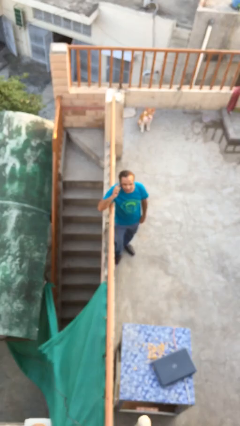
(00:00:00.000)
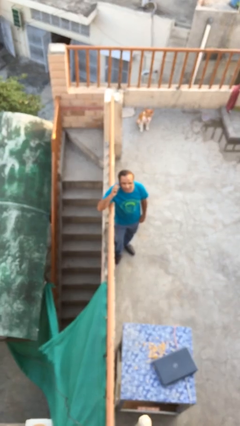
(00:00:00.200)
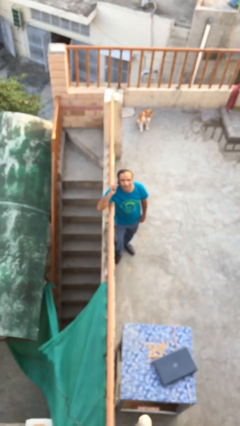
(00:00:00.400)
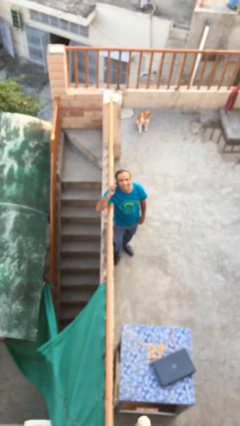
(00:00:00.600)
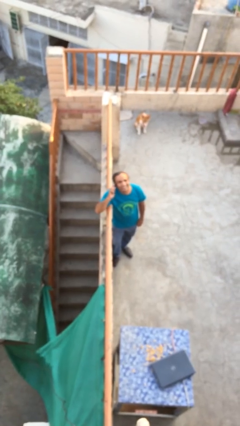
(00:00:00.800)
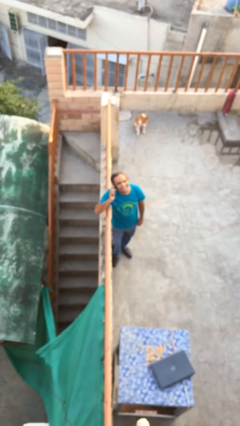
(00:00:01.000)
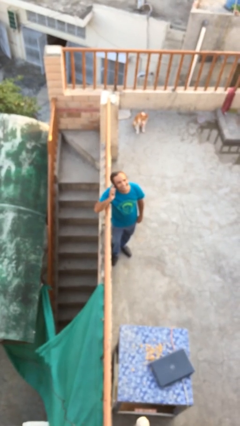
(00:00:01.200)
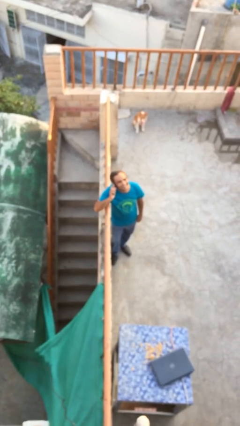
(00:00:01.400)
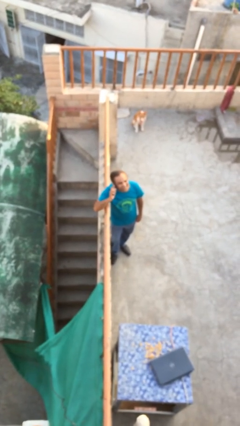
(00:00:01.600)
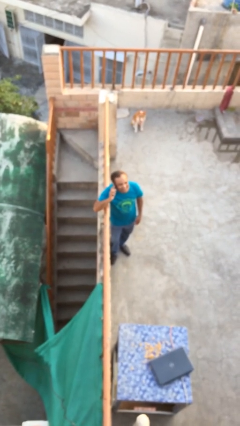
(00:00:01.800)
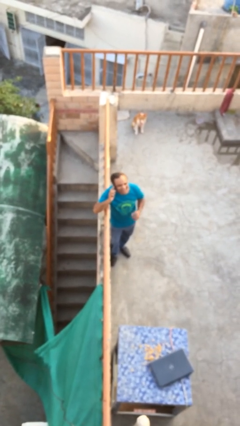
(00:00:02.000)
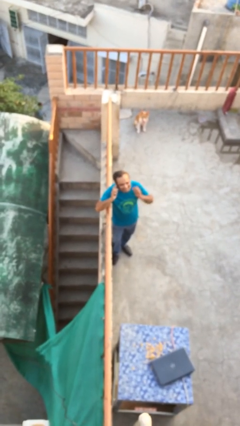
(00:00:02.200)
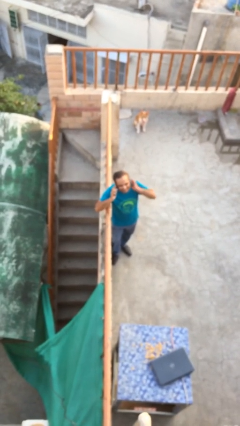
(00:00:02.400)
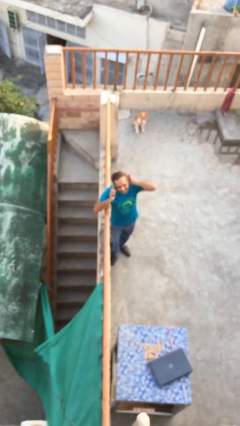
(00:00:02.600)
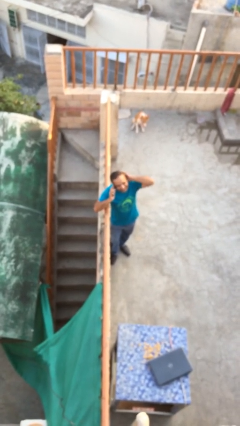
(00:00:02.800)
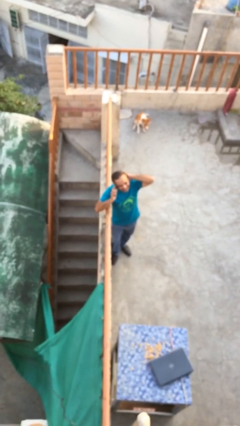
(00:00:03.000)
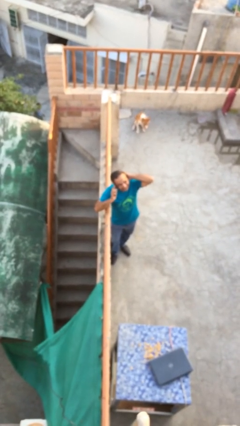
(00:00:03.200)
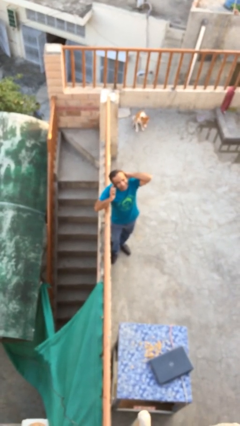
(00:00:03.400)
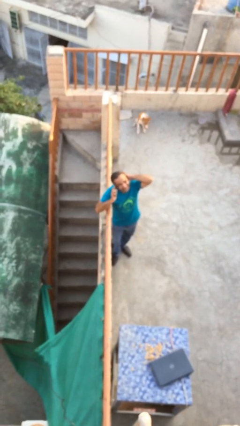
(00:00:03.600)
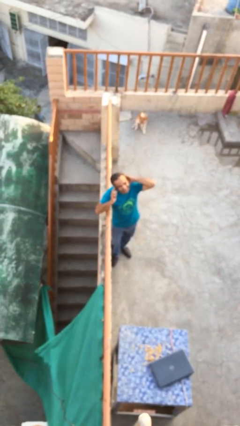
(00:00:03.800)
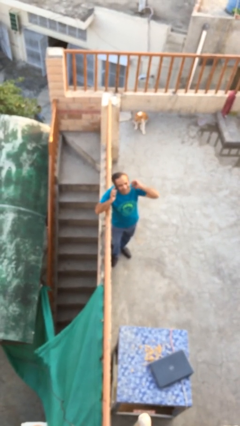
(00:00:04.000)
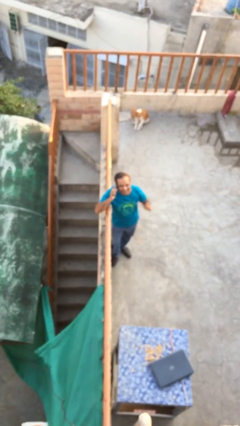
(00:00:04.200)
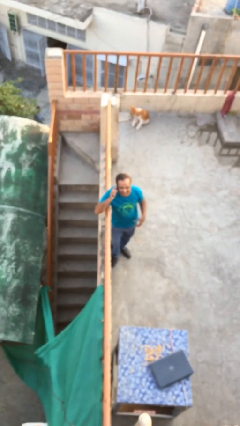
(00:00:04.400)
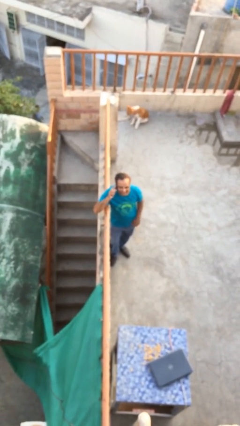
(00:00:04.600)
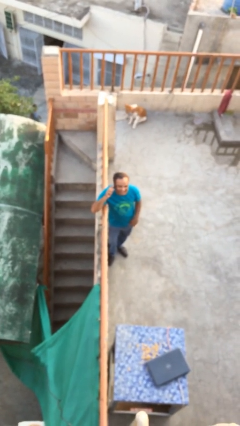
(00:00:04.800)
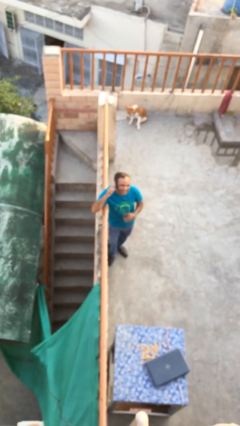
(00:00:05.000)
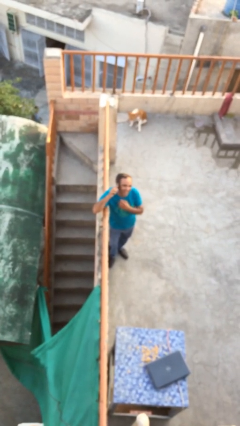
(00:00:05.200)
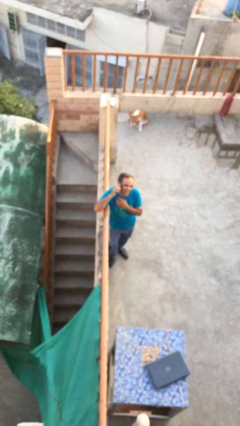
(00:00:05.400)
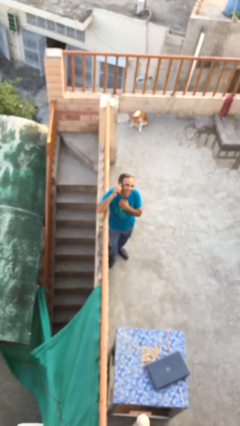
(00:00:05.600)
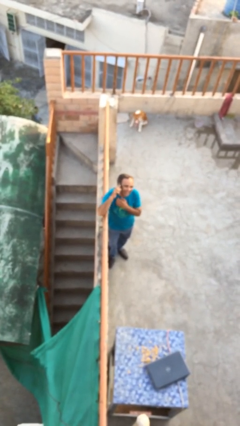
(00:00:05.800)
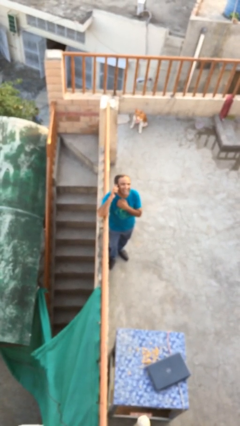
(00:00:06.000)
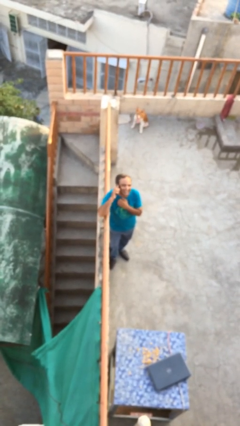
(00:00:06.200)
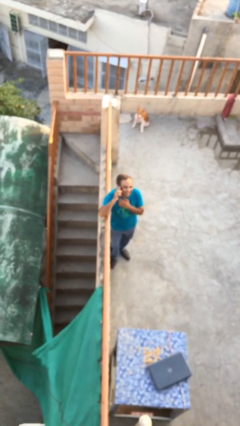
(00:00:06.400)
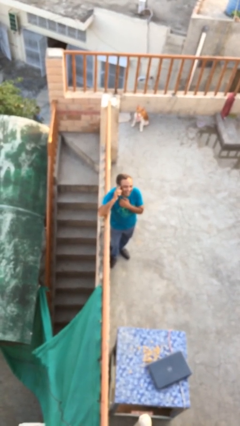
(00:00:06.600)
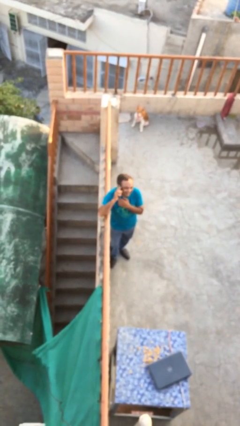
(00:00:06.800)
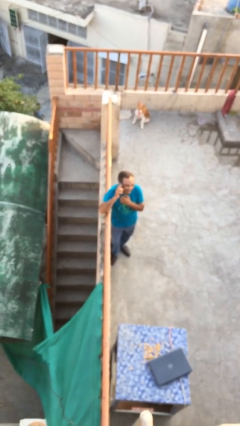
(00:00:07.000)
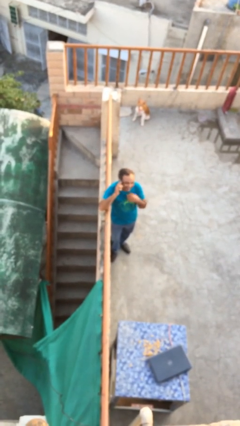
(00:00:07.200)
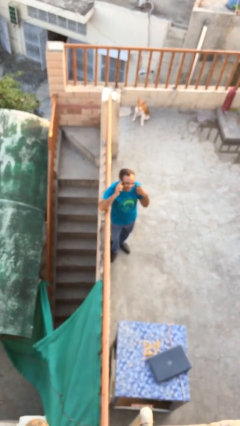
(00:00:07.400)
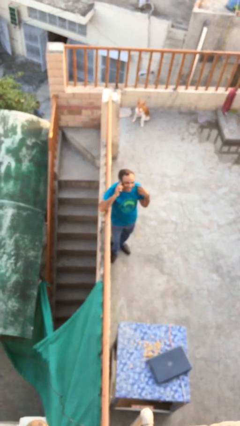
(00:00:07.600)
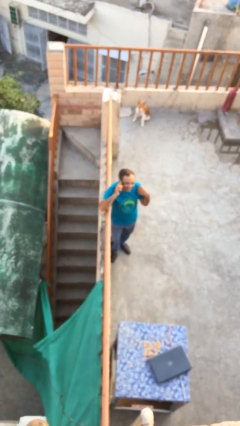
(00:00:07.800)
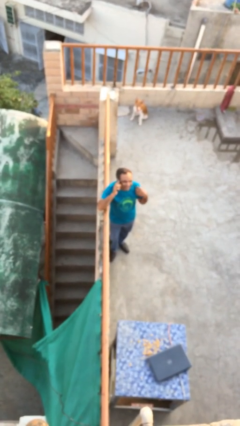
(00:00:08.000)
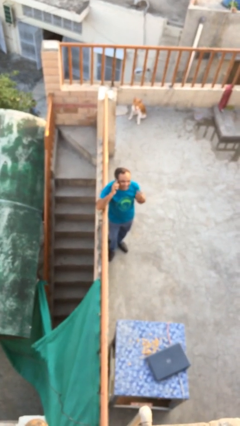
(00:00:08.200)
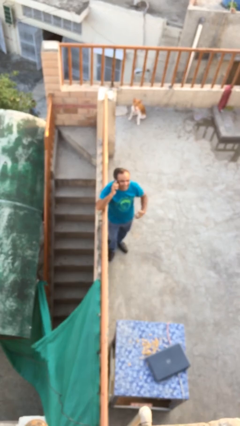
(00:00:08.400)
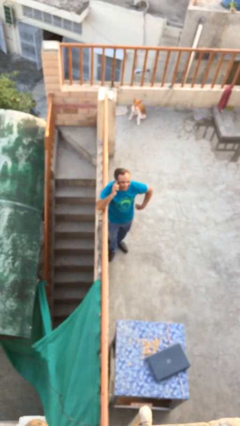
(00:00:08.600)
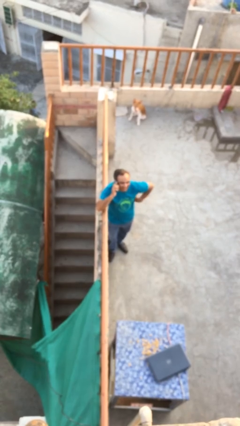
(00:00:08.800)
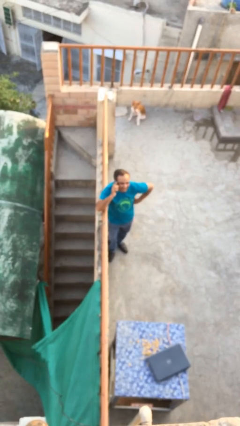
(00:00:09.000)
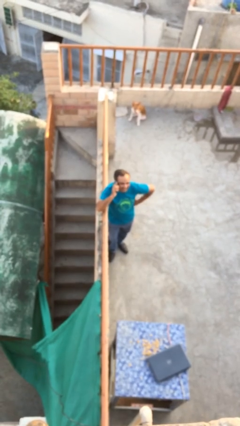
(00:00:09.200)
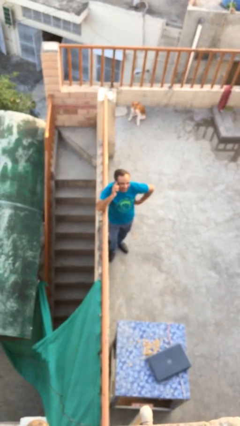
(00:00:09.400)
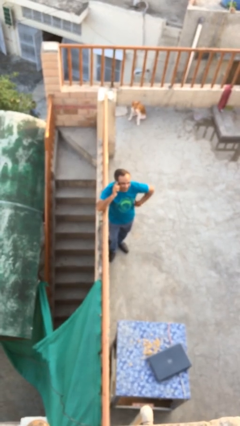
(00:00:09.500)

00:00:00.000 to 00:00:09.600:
person talks on phone

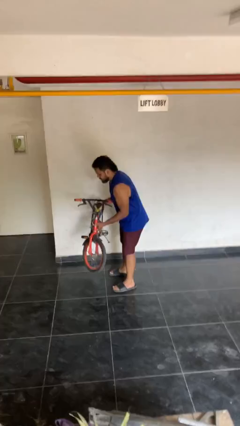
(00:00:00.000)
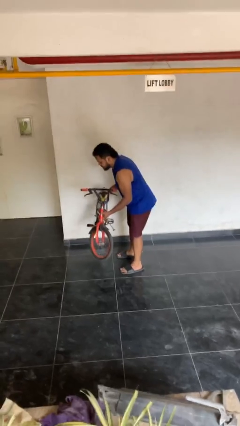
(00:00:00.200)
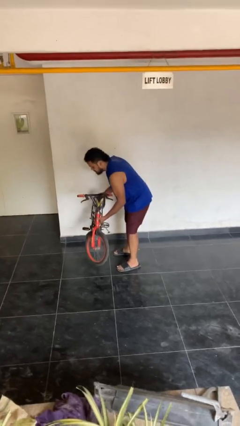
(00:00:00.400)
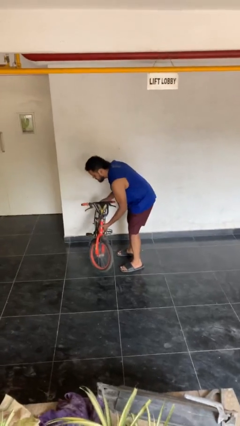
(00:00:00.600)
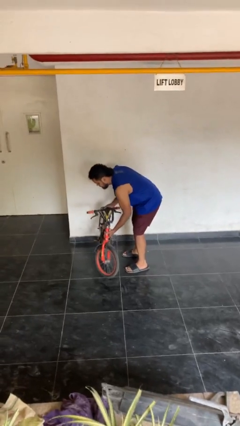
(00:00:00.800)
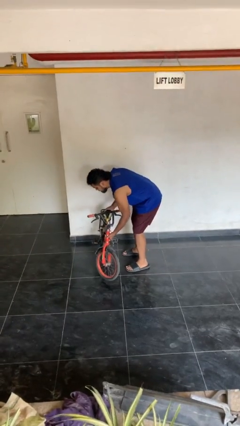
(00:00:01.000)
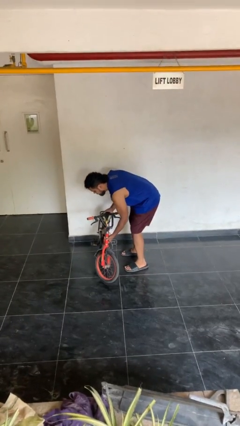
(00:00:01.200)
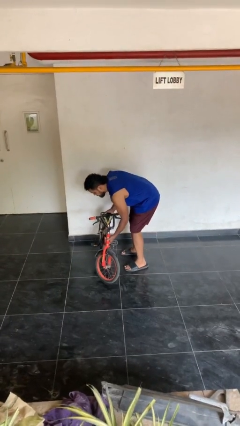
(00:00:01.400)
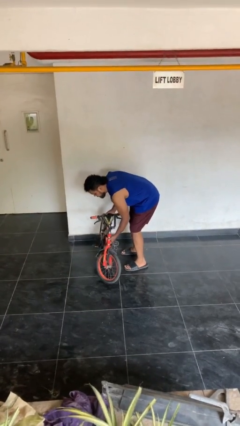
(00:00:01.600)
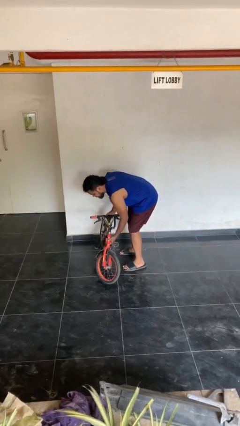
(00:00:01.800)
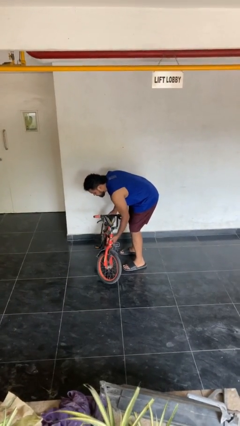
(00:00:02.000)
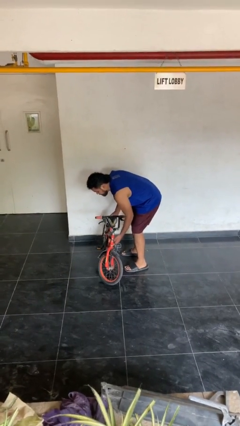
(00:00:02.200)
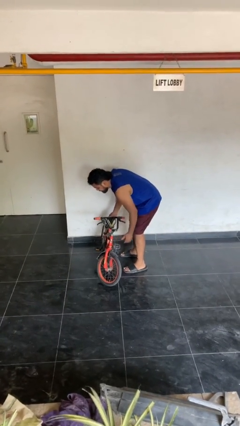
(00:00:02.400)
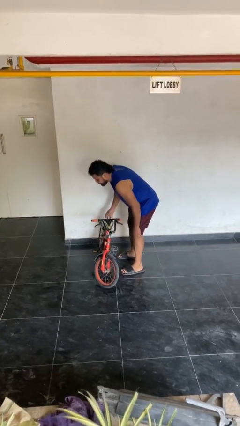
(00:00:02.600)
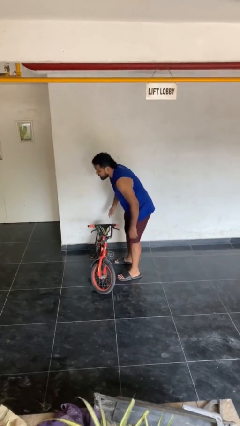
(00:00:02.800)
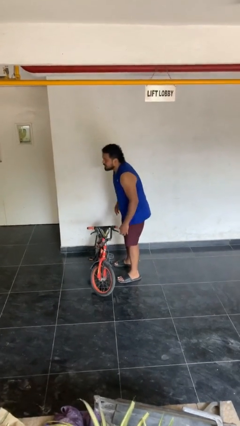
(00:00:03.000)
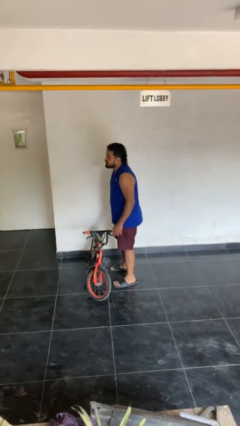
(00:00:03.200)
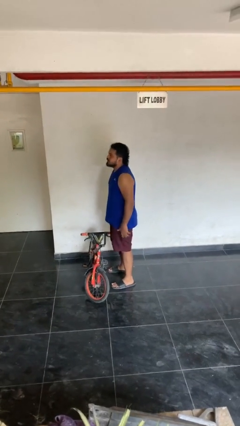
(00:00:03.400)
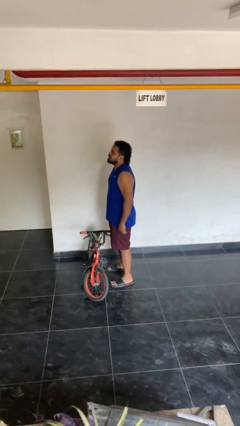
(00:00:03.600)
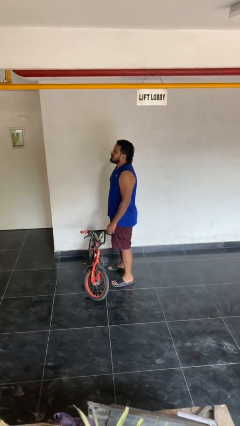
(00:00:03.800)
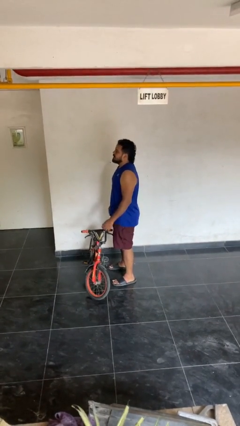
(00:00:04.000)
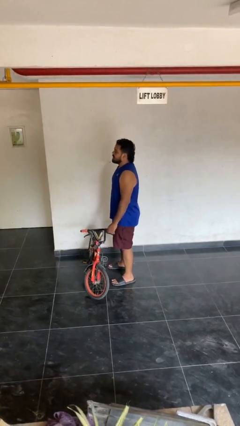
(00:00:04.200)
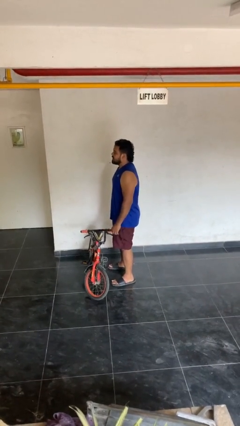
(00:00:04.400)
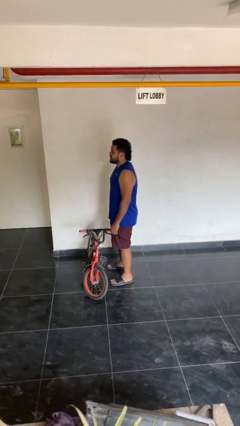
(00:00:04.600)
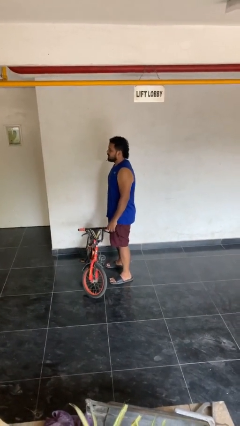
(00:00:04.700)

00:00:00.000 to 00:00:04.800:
person puts down object on floor

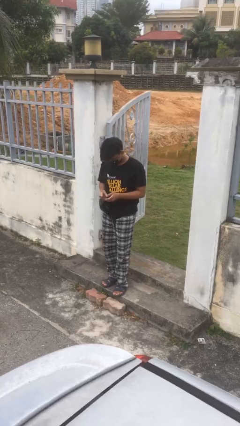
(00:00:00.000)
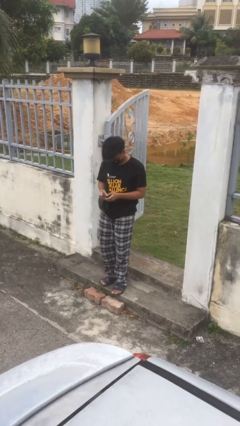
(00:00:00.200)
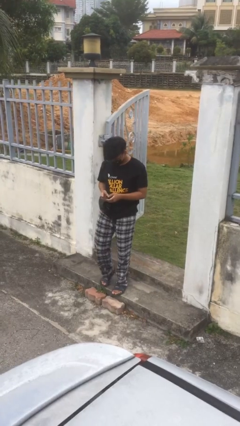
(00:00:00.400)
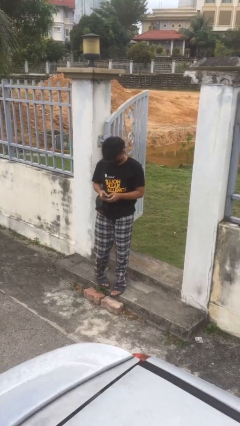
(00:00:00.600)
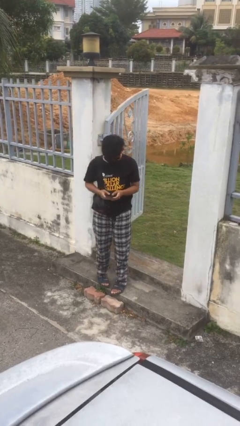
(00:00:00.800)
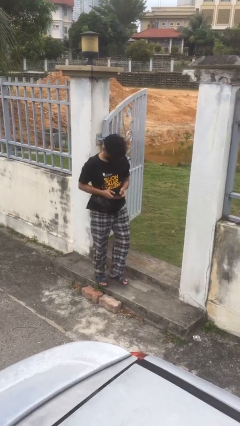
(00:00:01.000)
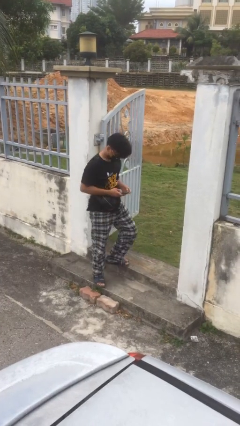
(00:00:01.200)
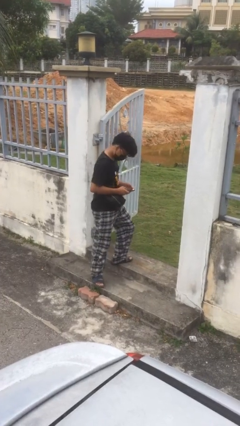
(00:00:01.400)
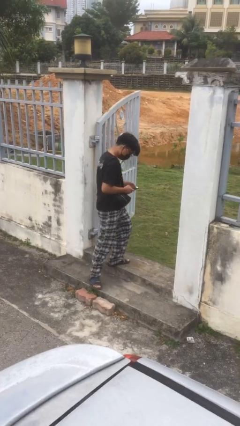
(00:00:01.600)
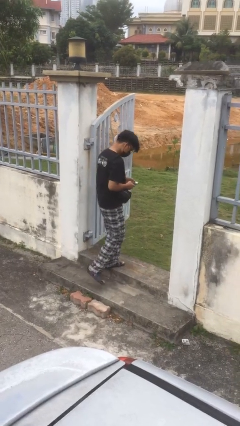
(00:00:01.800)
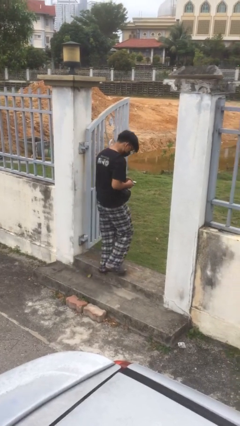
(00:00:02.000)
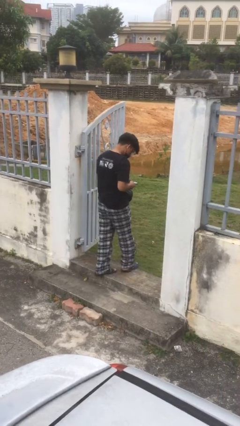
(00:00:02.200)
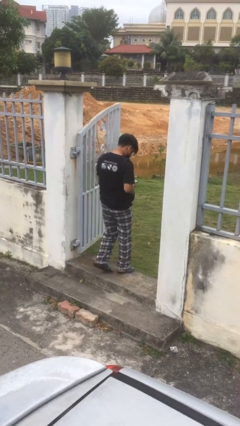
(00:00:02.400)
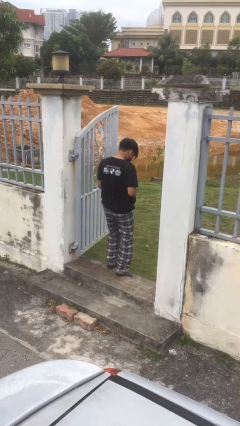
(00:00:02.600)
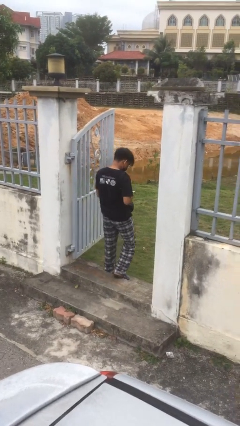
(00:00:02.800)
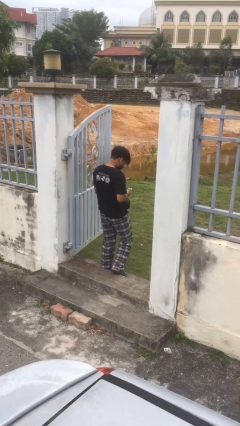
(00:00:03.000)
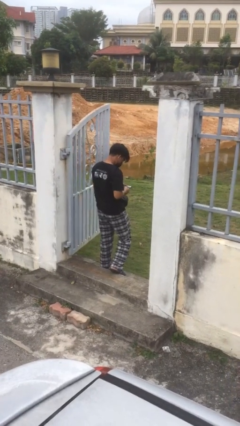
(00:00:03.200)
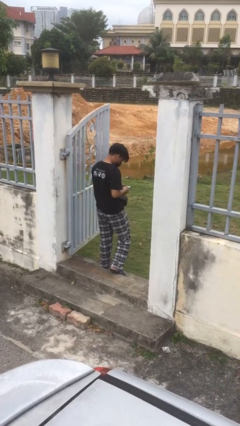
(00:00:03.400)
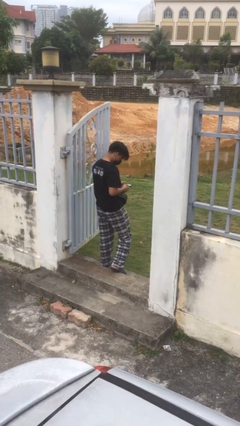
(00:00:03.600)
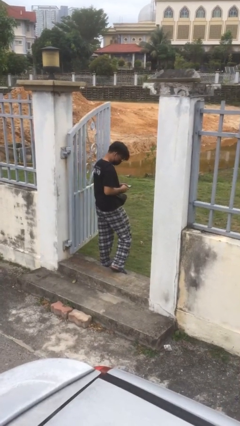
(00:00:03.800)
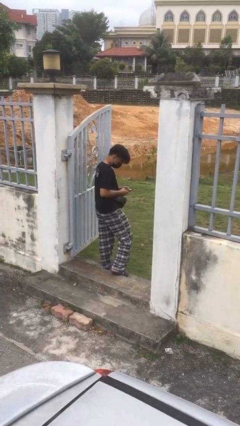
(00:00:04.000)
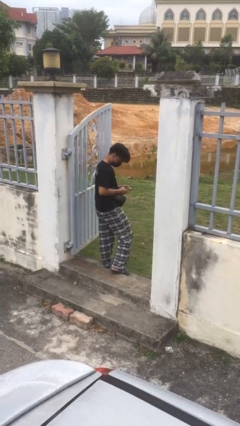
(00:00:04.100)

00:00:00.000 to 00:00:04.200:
person exits scene through structure
